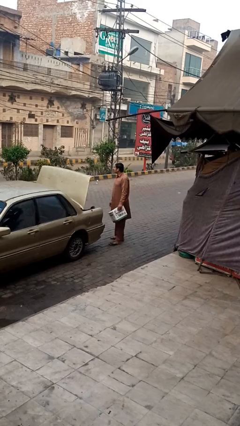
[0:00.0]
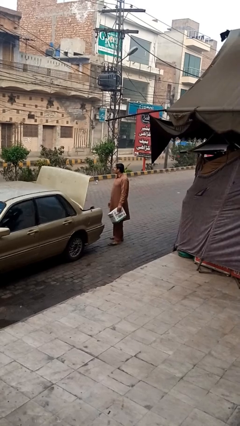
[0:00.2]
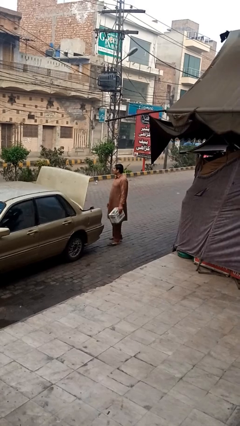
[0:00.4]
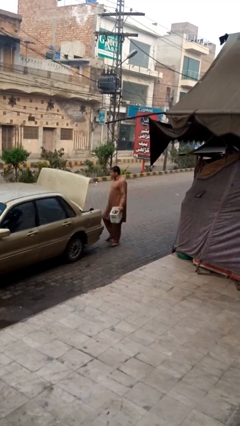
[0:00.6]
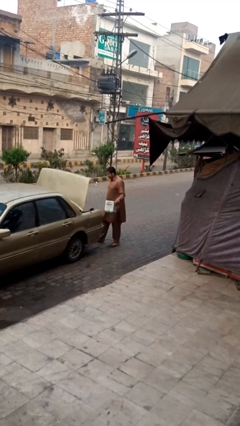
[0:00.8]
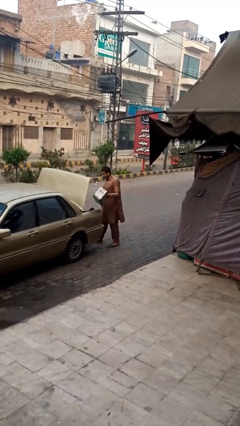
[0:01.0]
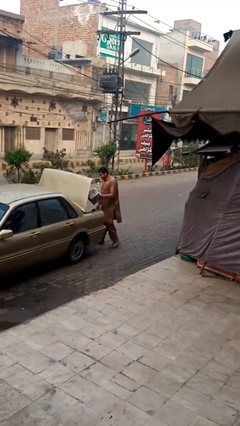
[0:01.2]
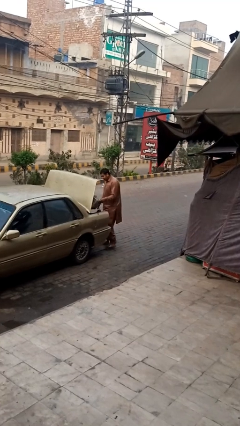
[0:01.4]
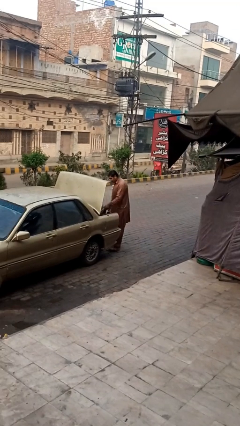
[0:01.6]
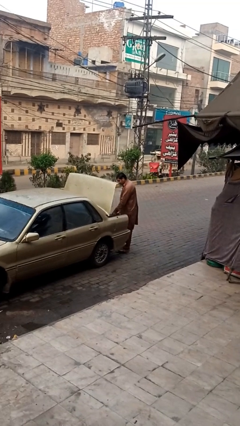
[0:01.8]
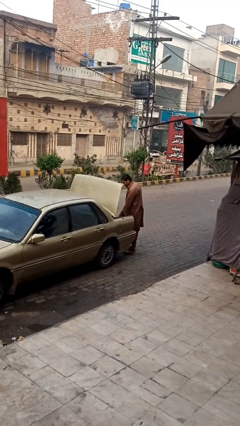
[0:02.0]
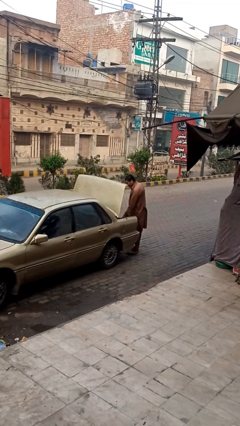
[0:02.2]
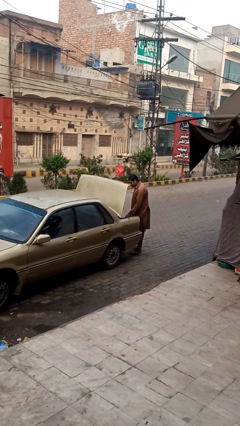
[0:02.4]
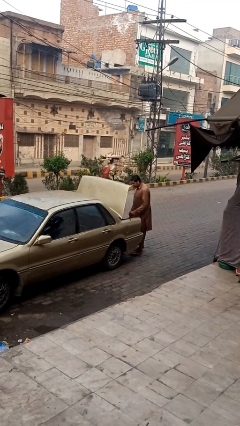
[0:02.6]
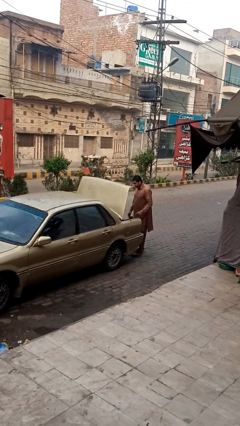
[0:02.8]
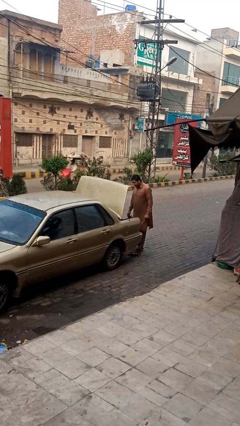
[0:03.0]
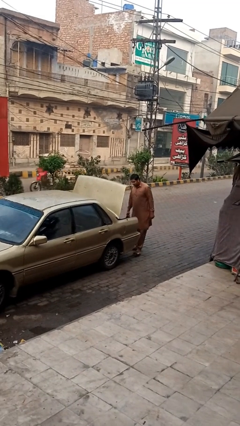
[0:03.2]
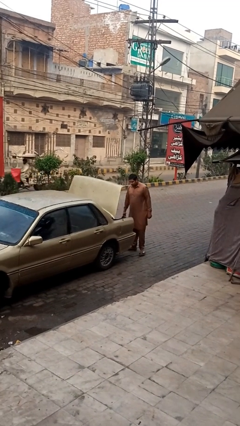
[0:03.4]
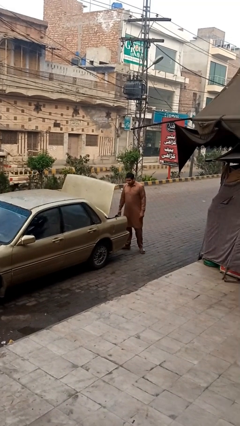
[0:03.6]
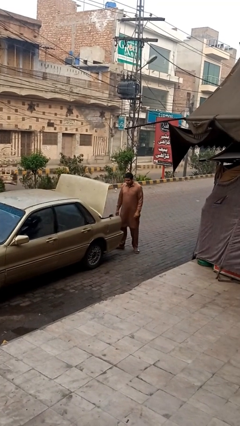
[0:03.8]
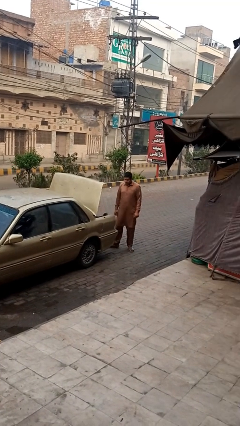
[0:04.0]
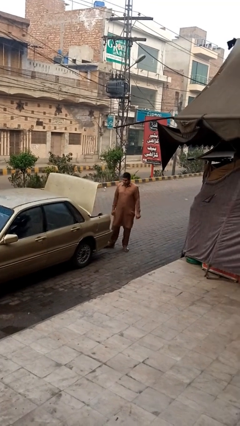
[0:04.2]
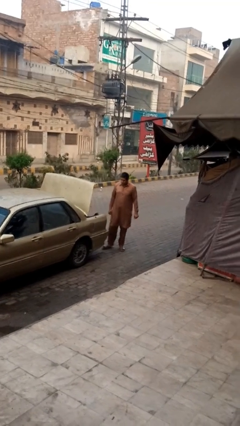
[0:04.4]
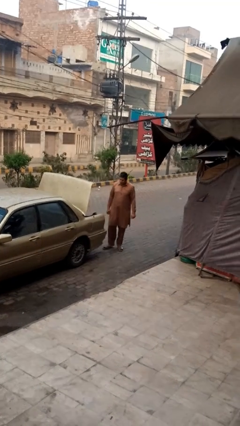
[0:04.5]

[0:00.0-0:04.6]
person loads car

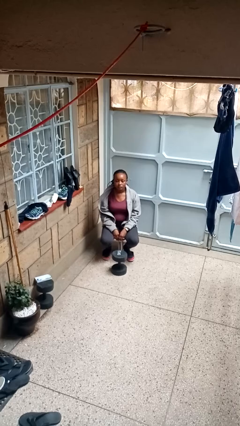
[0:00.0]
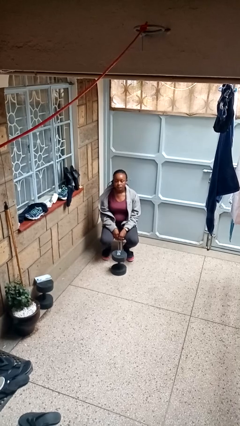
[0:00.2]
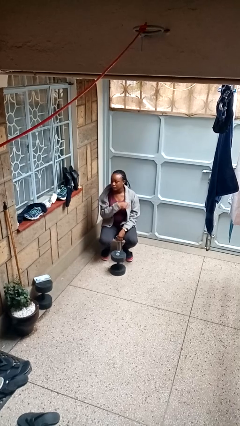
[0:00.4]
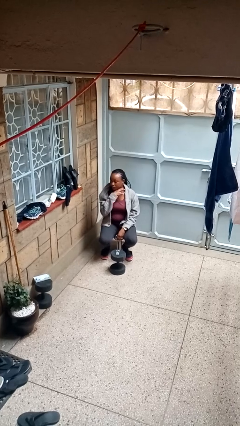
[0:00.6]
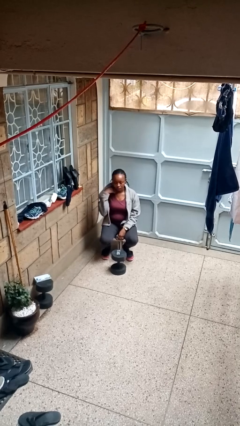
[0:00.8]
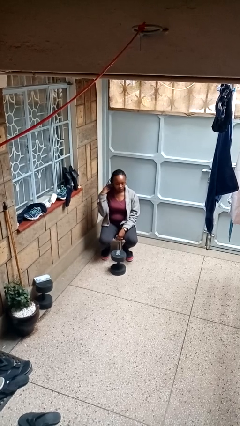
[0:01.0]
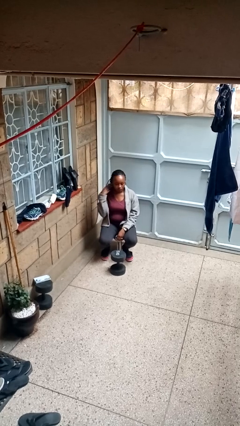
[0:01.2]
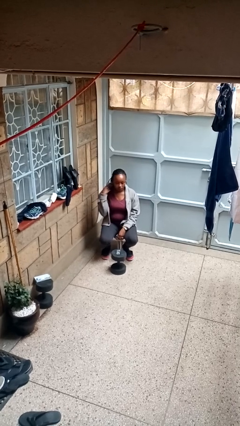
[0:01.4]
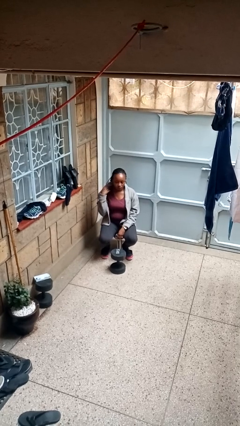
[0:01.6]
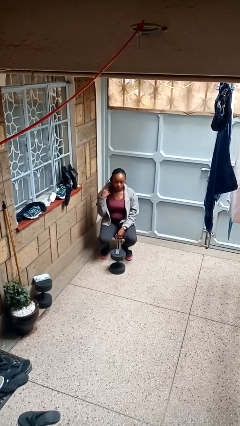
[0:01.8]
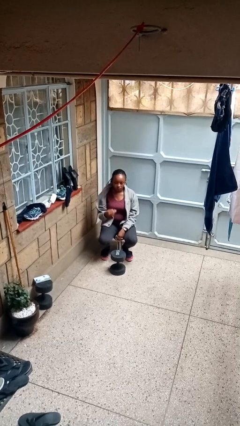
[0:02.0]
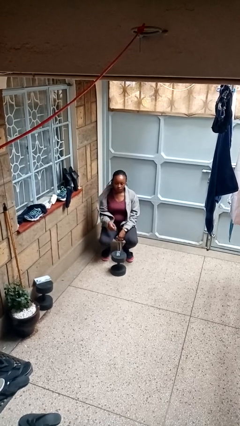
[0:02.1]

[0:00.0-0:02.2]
person gestures cut

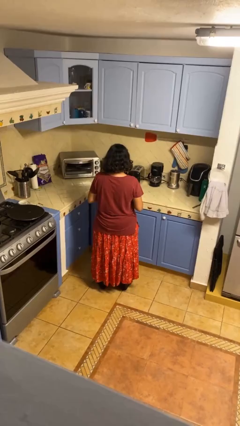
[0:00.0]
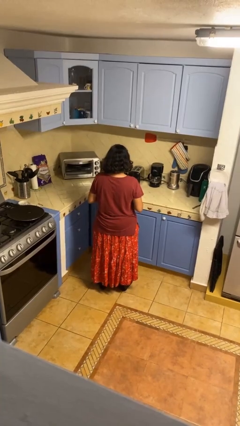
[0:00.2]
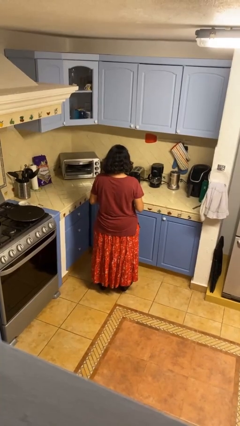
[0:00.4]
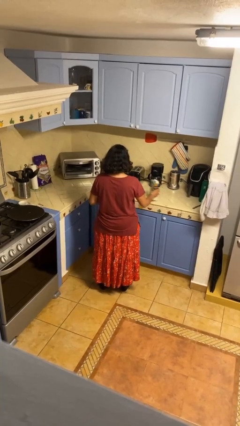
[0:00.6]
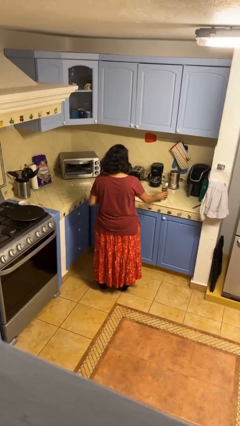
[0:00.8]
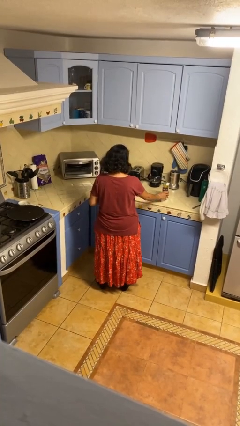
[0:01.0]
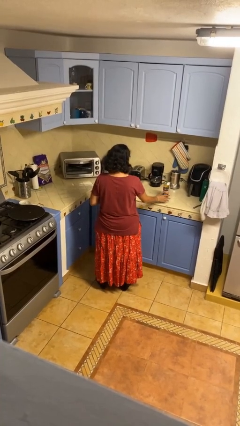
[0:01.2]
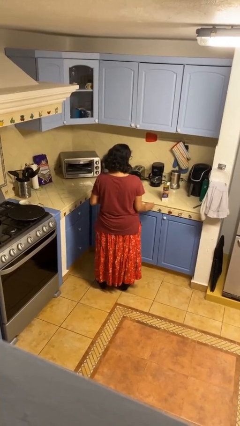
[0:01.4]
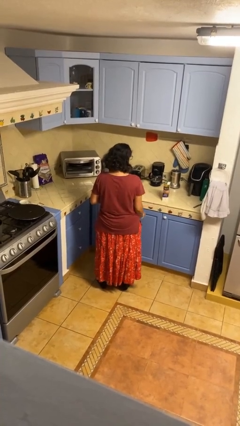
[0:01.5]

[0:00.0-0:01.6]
person puts down object on countertop

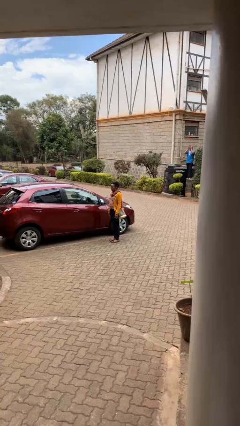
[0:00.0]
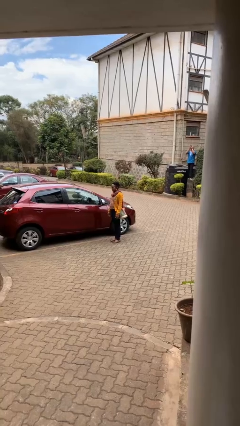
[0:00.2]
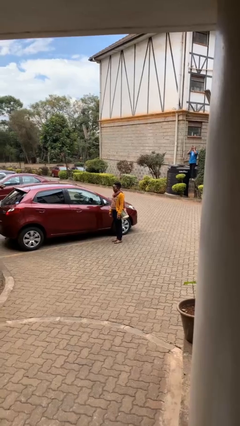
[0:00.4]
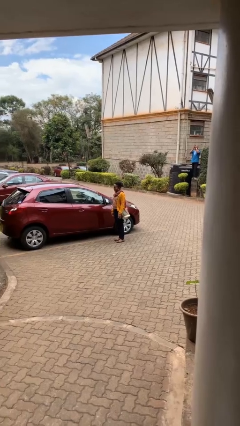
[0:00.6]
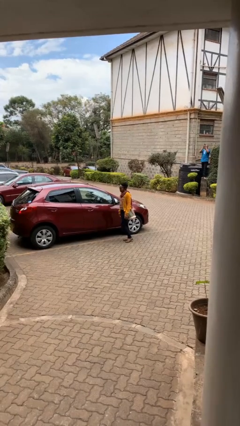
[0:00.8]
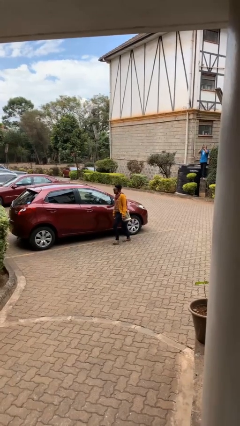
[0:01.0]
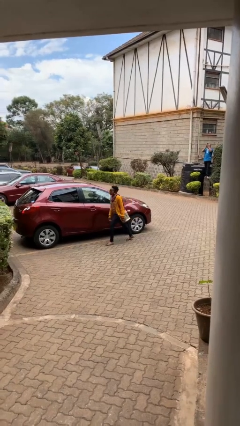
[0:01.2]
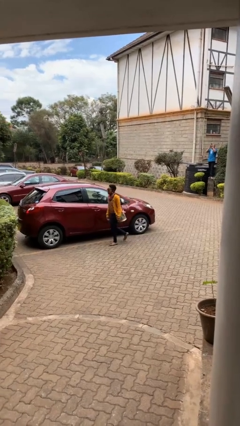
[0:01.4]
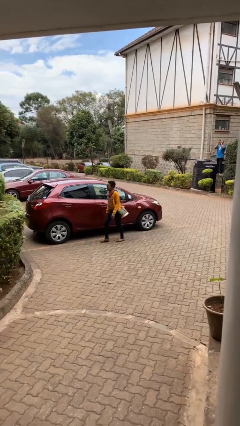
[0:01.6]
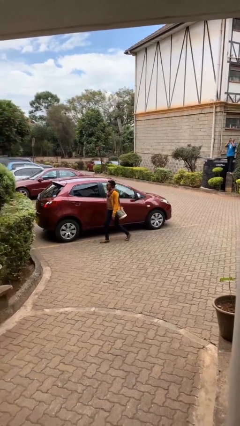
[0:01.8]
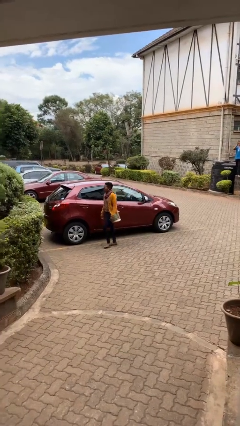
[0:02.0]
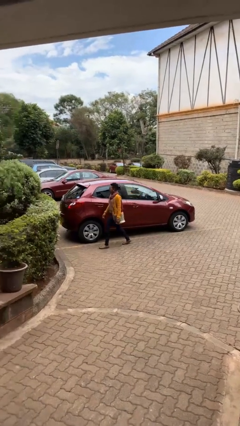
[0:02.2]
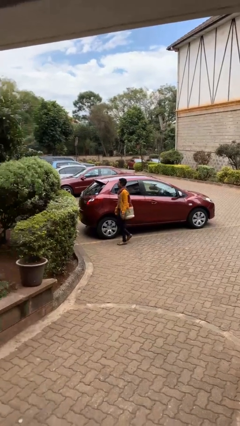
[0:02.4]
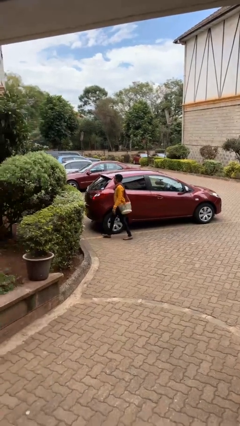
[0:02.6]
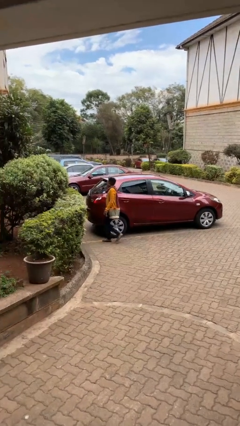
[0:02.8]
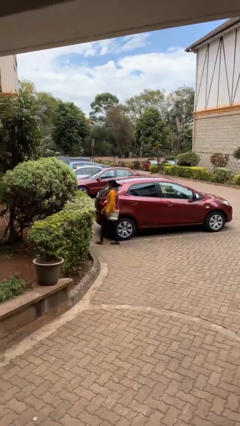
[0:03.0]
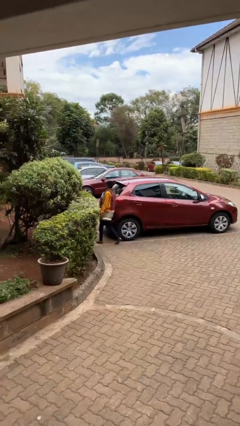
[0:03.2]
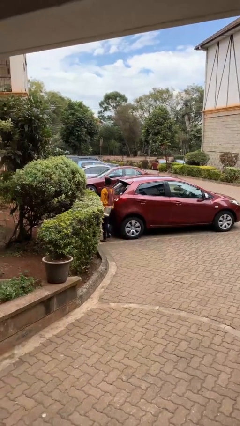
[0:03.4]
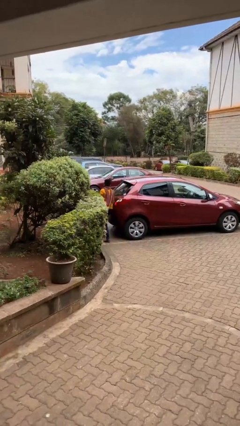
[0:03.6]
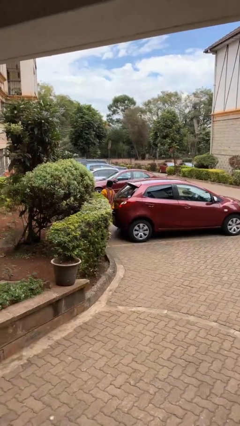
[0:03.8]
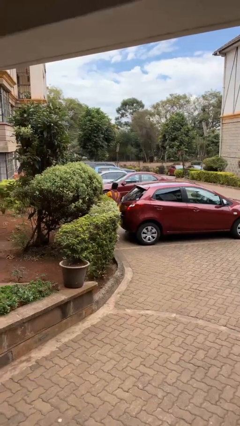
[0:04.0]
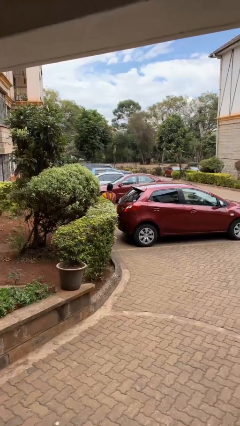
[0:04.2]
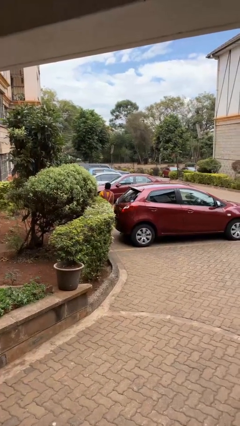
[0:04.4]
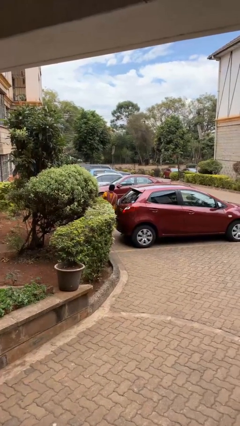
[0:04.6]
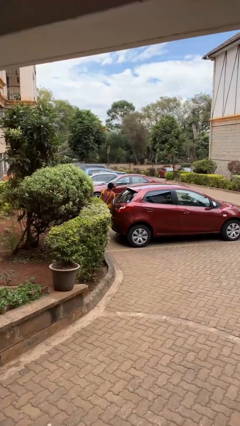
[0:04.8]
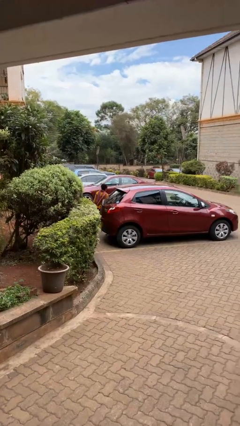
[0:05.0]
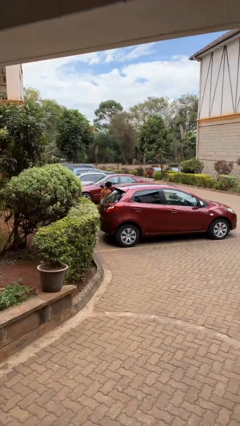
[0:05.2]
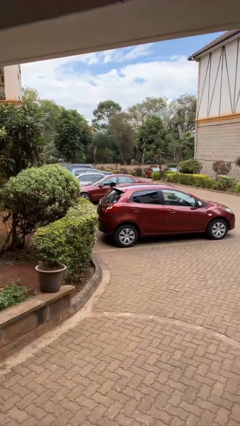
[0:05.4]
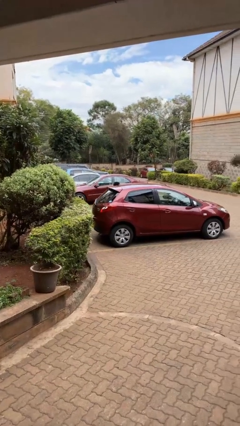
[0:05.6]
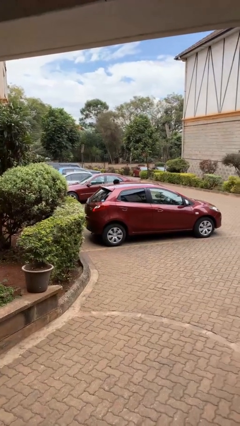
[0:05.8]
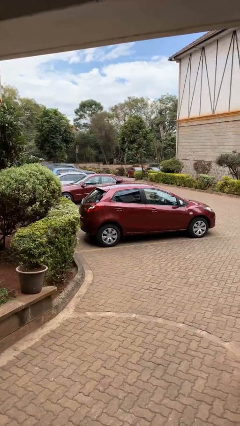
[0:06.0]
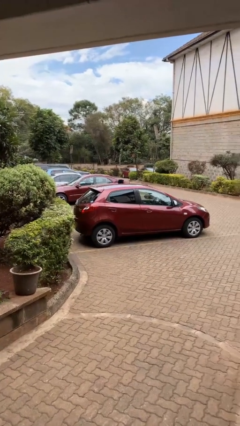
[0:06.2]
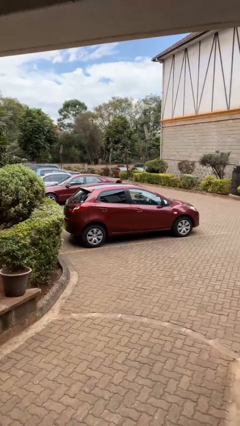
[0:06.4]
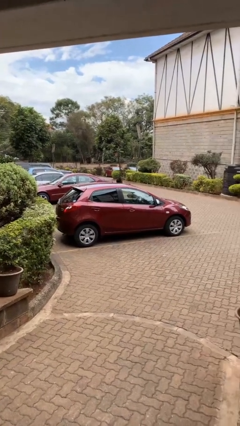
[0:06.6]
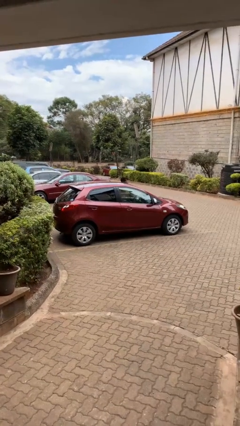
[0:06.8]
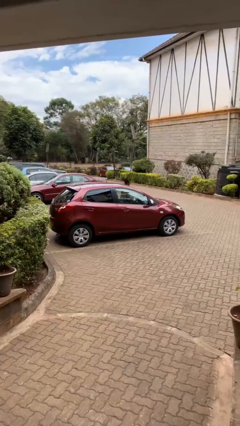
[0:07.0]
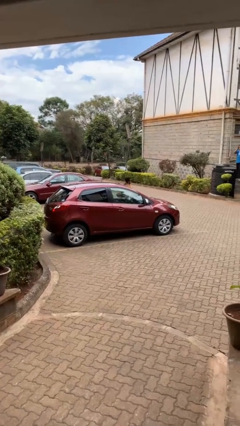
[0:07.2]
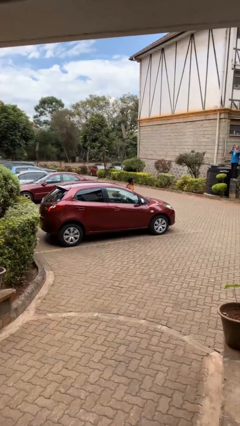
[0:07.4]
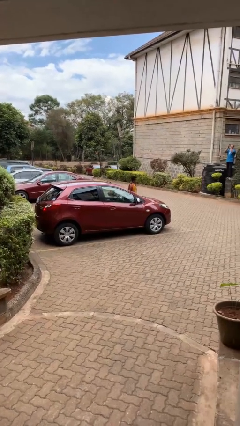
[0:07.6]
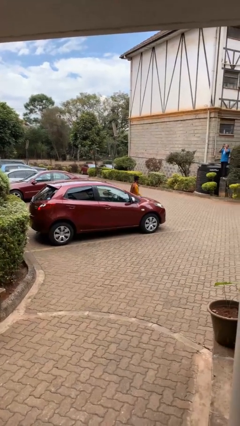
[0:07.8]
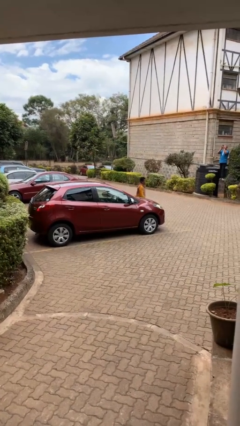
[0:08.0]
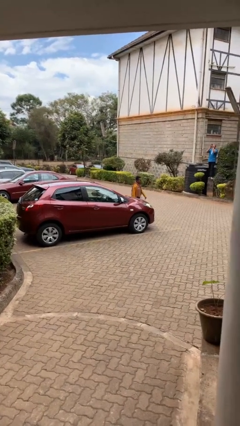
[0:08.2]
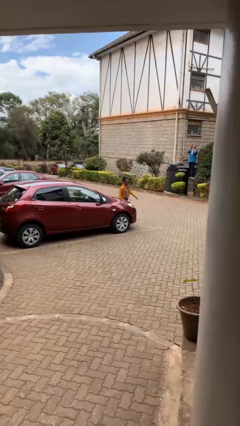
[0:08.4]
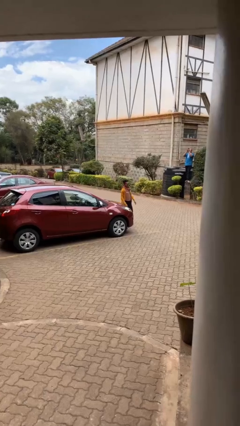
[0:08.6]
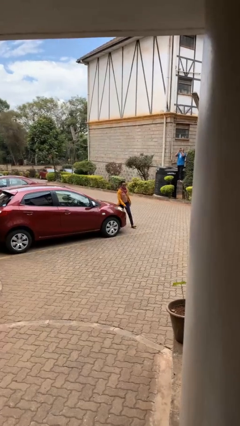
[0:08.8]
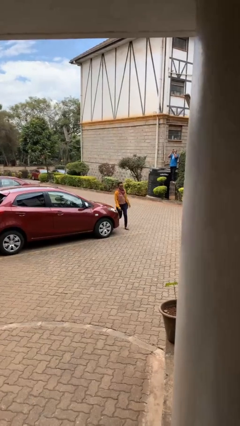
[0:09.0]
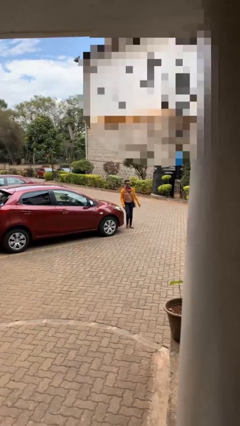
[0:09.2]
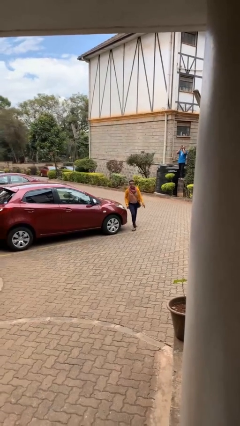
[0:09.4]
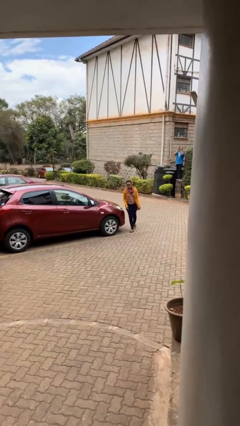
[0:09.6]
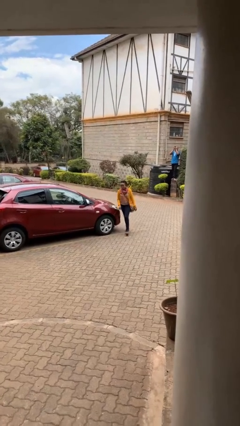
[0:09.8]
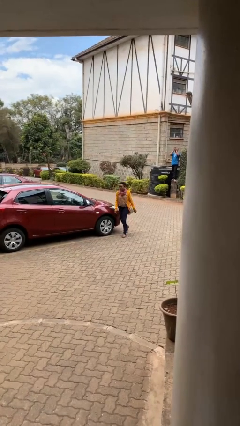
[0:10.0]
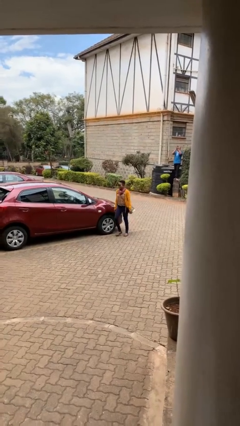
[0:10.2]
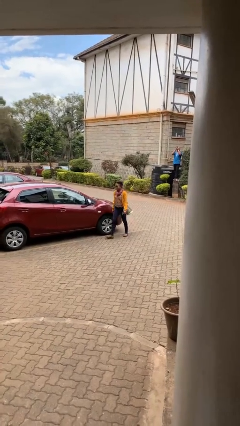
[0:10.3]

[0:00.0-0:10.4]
person walks around car
